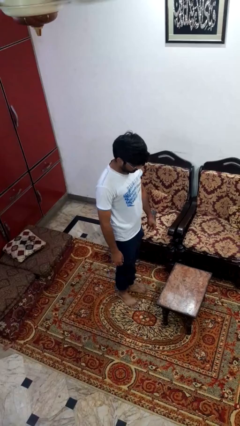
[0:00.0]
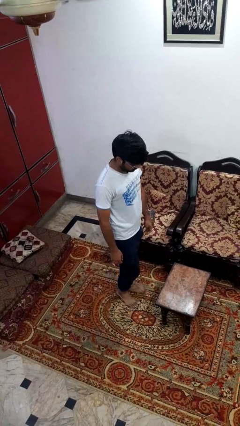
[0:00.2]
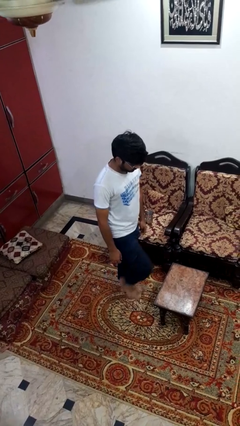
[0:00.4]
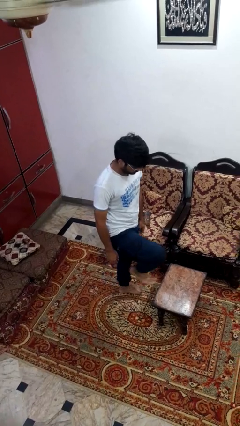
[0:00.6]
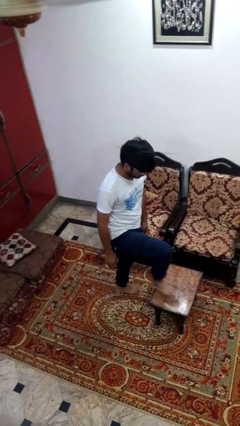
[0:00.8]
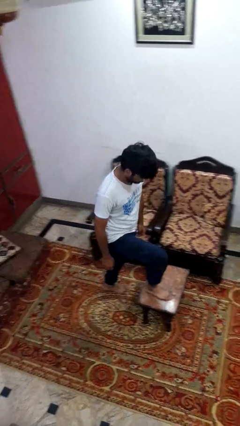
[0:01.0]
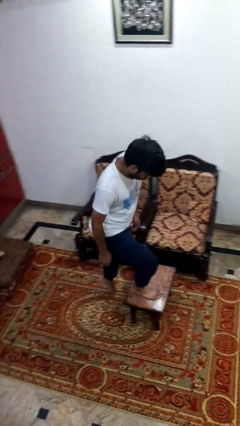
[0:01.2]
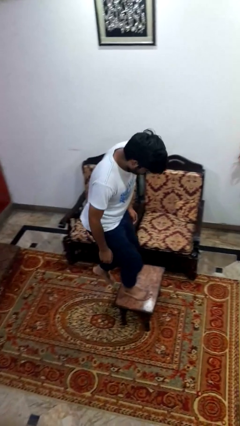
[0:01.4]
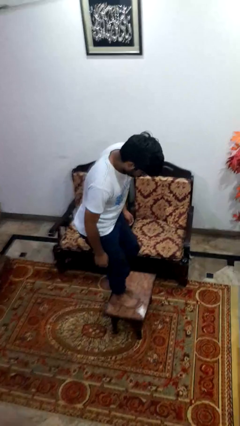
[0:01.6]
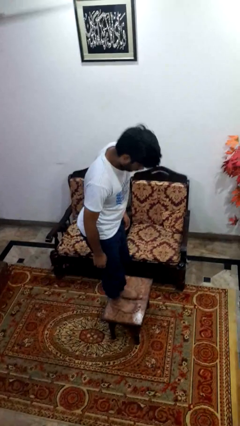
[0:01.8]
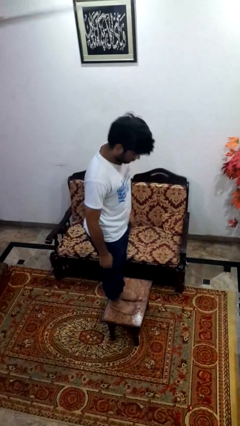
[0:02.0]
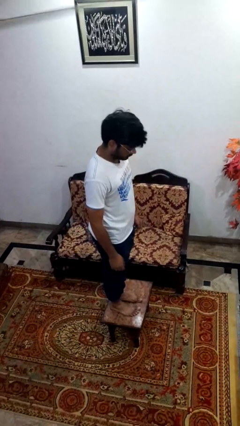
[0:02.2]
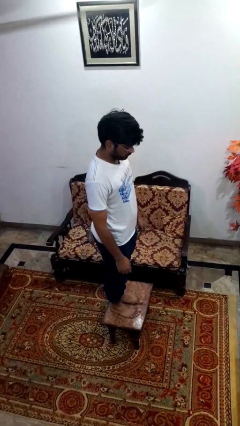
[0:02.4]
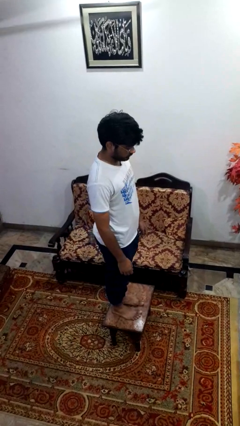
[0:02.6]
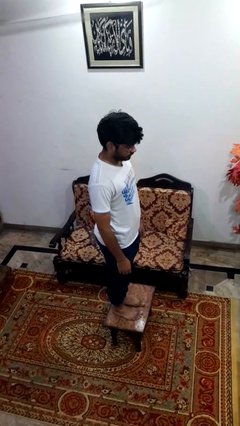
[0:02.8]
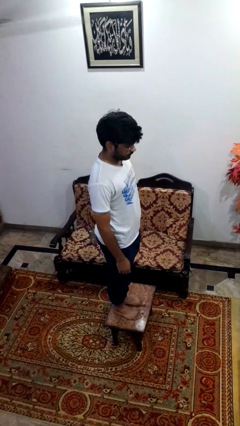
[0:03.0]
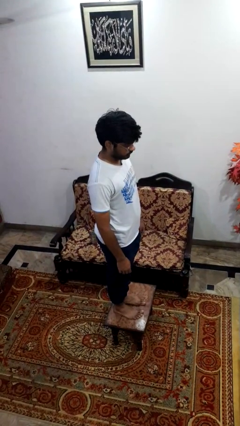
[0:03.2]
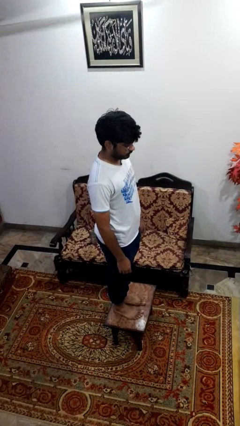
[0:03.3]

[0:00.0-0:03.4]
person climbs on table

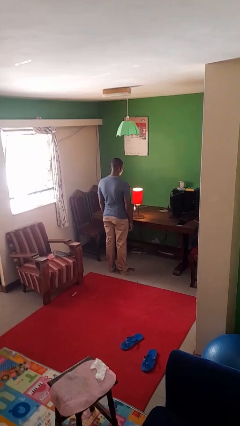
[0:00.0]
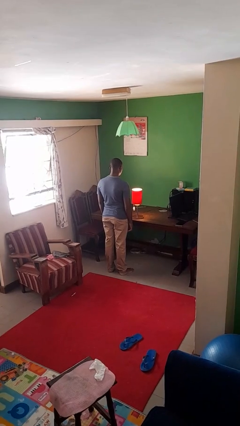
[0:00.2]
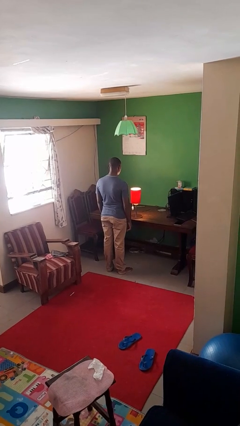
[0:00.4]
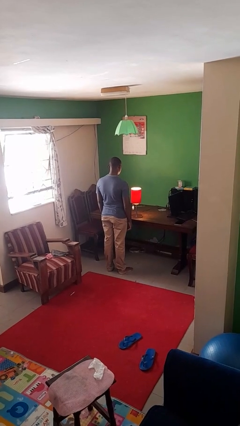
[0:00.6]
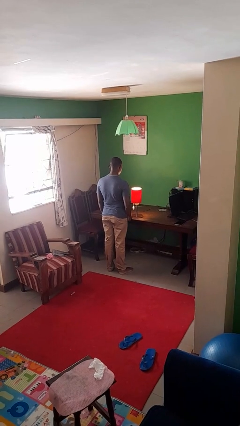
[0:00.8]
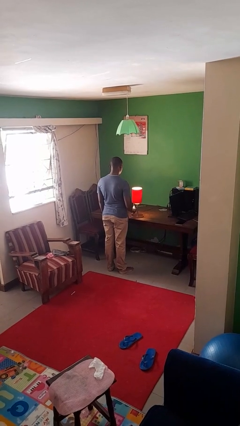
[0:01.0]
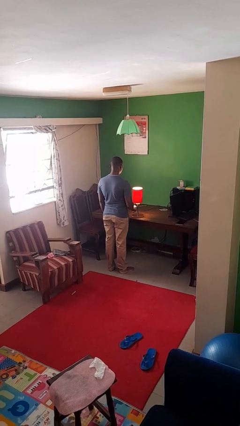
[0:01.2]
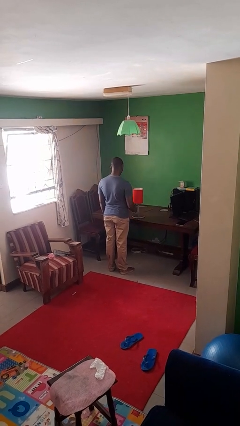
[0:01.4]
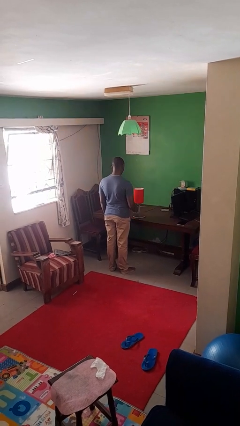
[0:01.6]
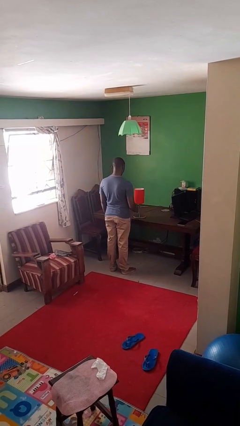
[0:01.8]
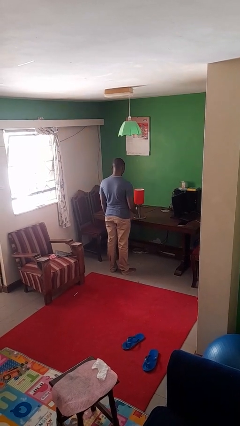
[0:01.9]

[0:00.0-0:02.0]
person turns off lamp

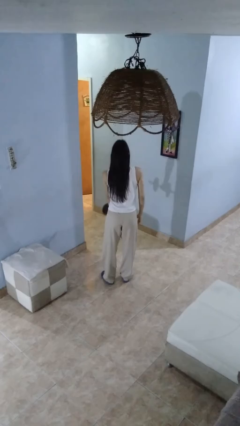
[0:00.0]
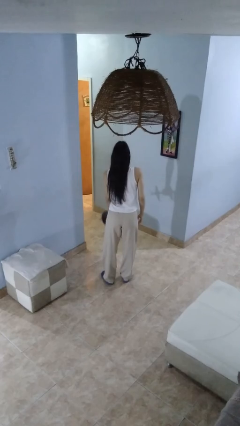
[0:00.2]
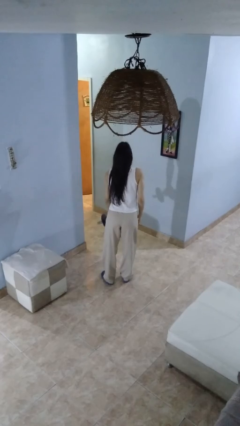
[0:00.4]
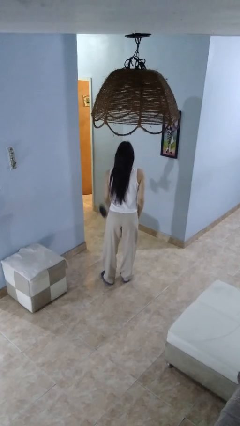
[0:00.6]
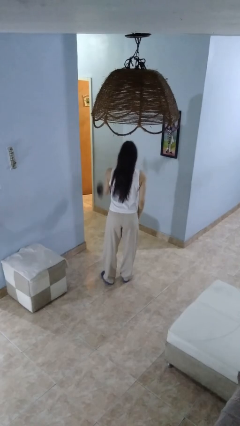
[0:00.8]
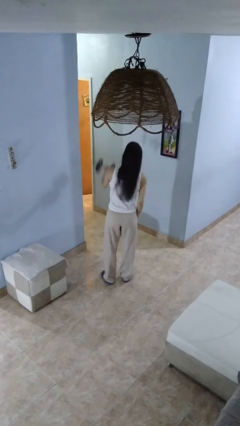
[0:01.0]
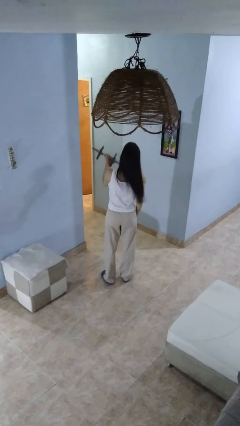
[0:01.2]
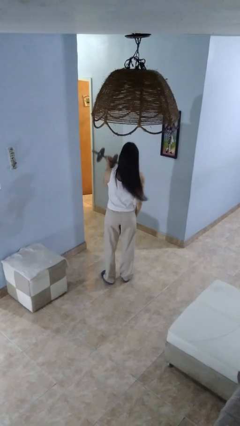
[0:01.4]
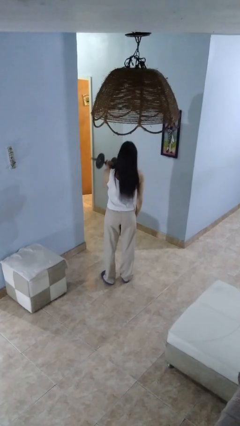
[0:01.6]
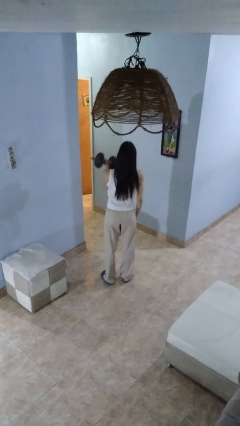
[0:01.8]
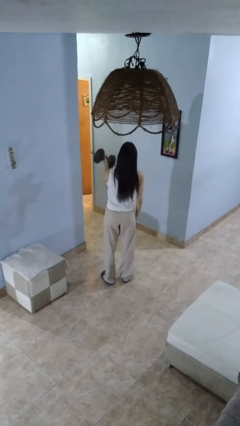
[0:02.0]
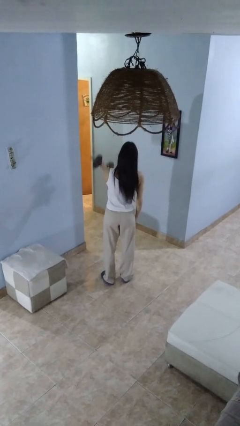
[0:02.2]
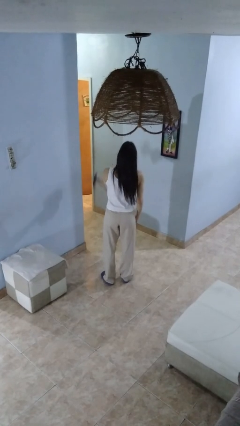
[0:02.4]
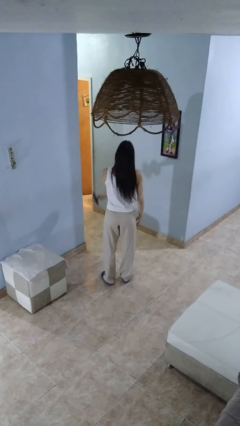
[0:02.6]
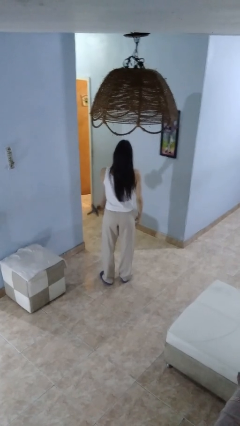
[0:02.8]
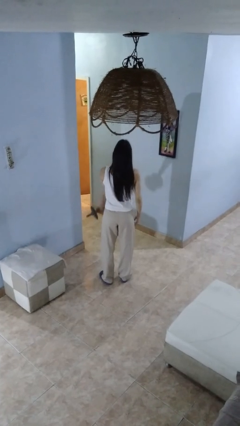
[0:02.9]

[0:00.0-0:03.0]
person lifts dumbbells

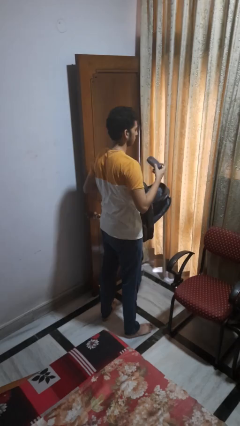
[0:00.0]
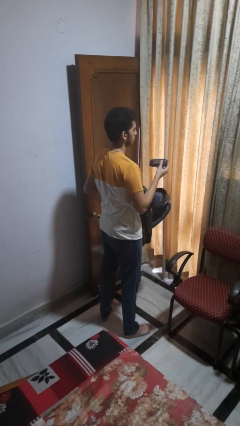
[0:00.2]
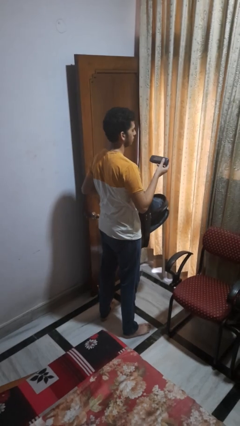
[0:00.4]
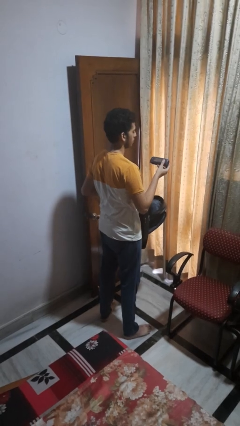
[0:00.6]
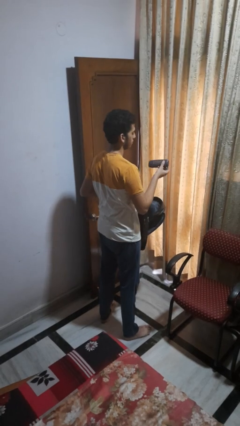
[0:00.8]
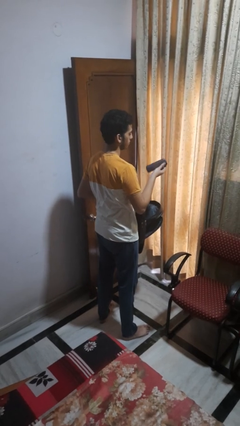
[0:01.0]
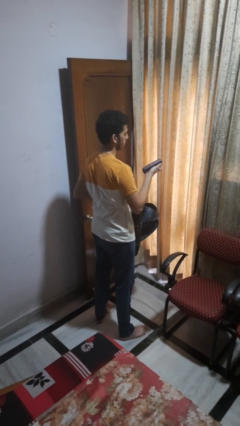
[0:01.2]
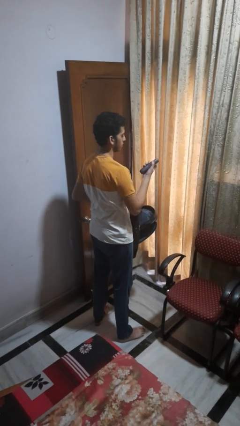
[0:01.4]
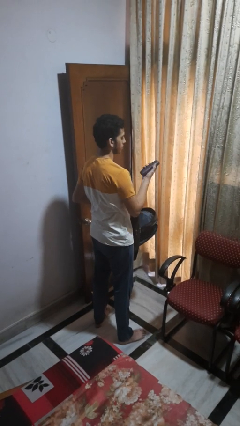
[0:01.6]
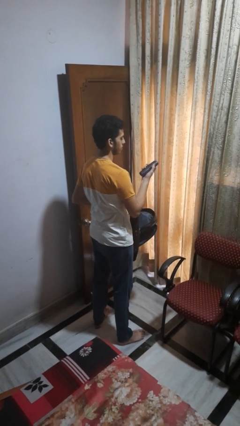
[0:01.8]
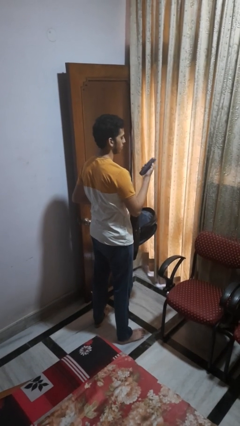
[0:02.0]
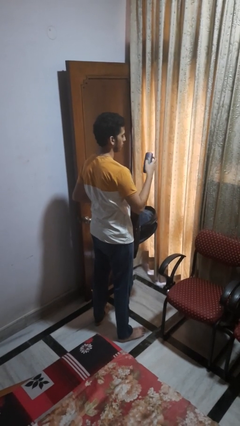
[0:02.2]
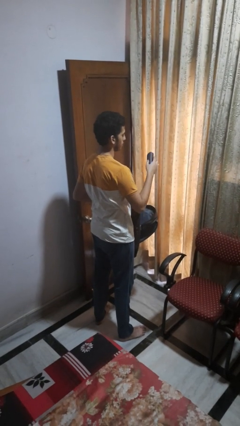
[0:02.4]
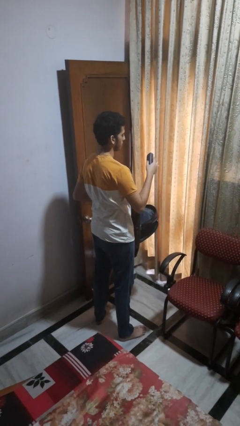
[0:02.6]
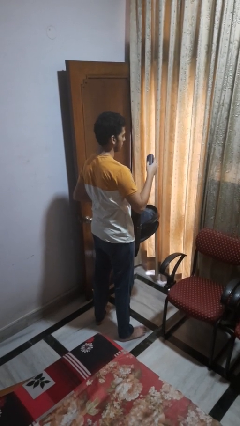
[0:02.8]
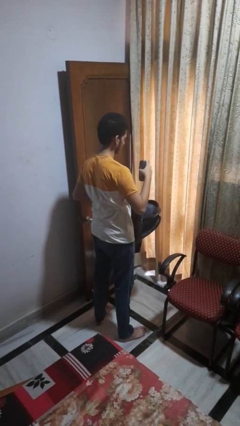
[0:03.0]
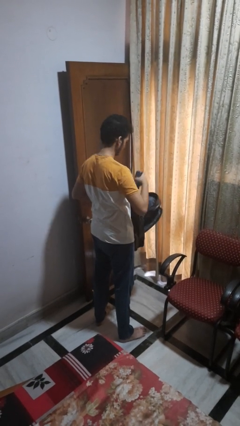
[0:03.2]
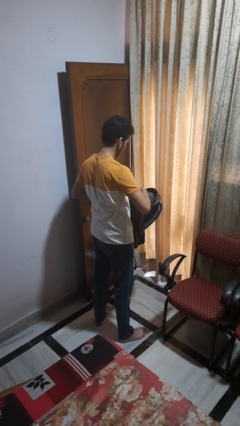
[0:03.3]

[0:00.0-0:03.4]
person takes object from backpack

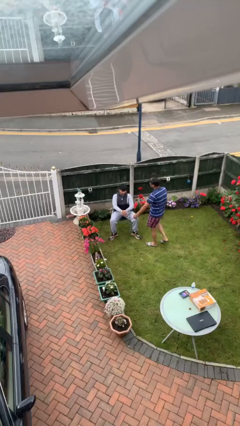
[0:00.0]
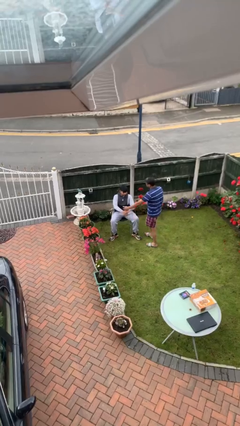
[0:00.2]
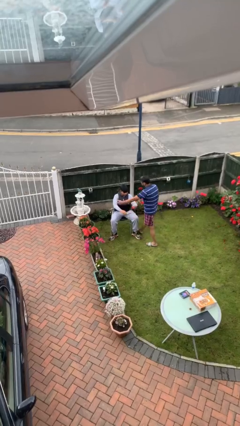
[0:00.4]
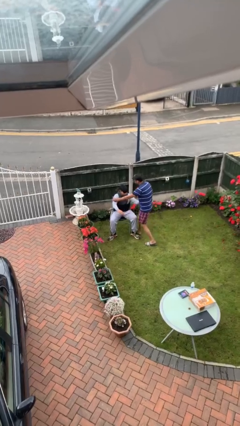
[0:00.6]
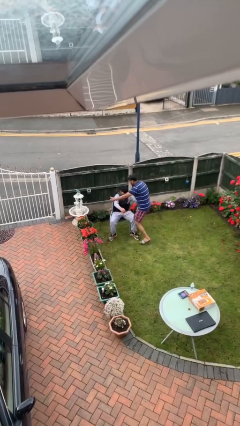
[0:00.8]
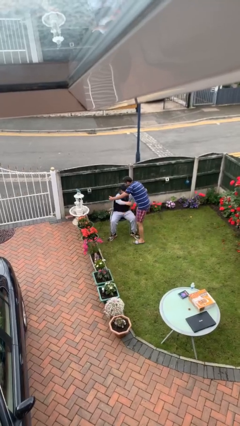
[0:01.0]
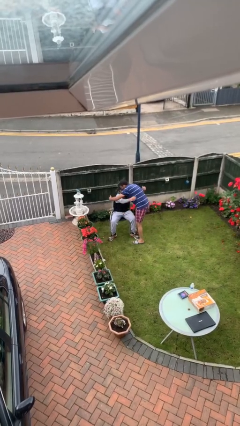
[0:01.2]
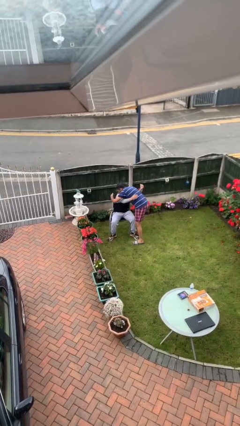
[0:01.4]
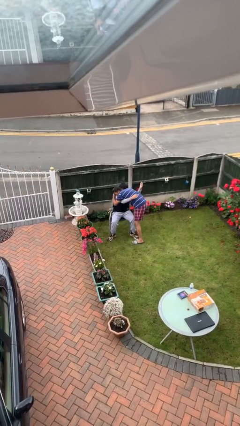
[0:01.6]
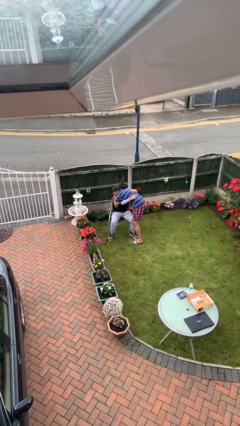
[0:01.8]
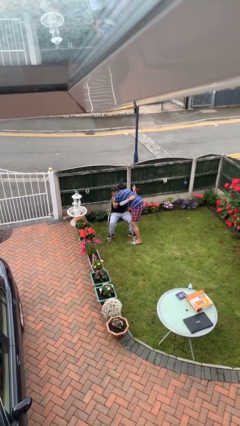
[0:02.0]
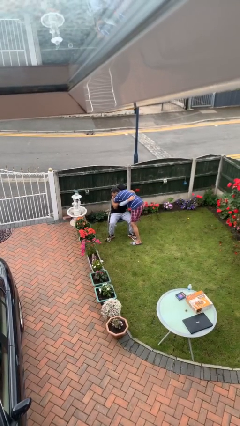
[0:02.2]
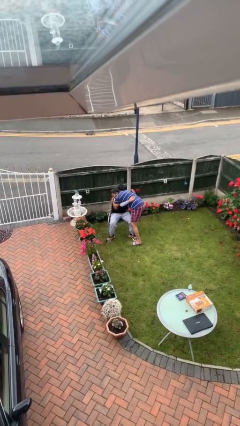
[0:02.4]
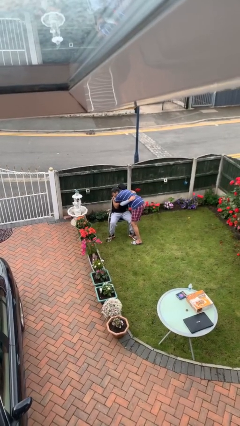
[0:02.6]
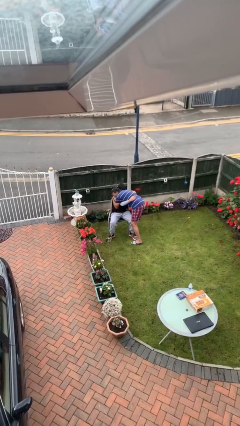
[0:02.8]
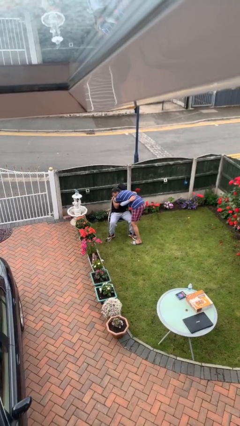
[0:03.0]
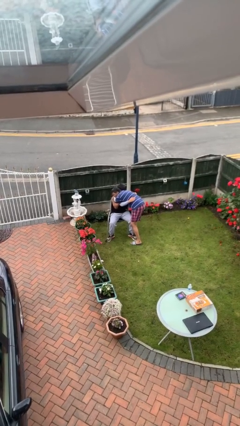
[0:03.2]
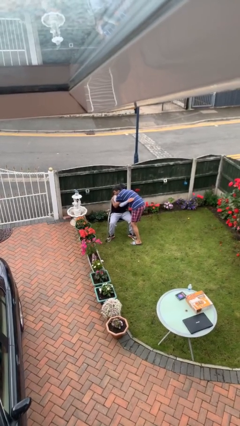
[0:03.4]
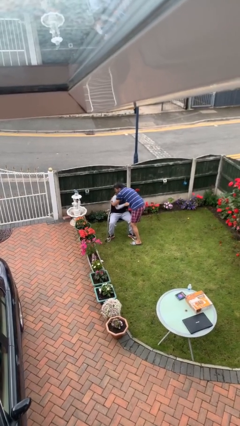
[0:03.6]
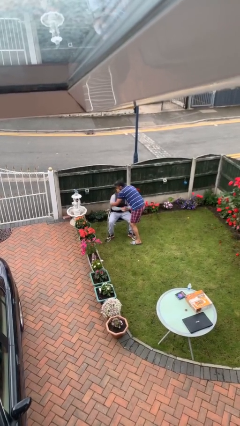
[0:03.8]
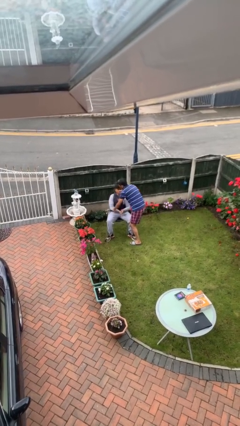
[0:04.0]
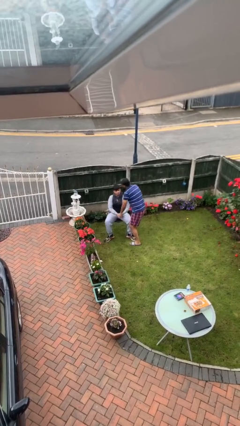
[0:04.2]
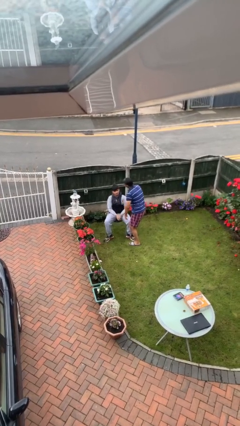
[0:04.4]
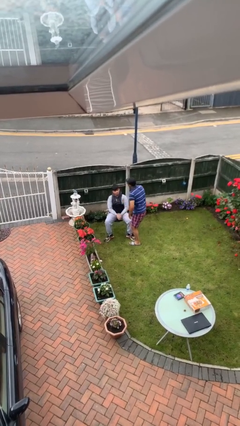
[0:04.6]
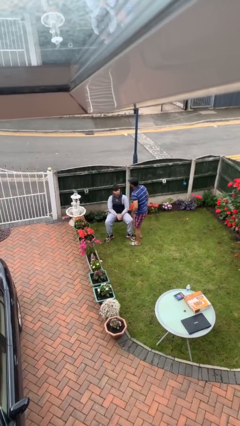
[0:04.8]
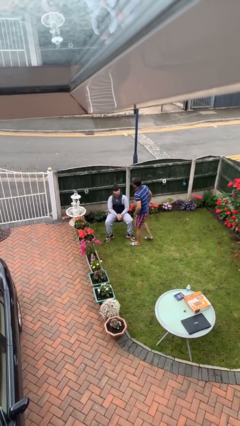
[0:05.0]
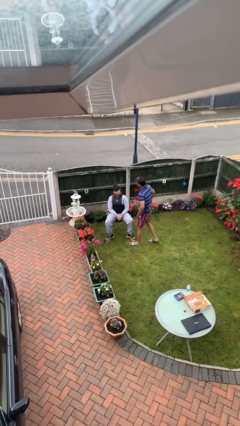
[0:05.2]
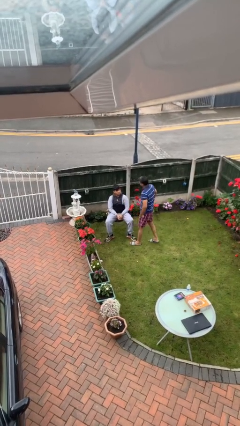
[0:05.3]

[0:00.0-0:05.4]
person embraces person
